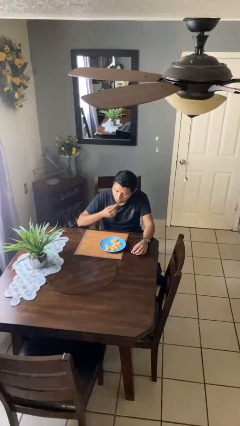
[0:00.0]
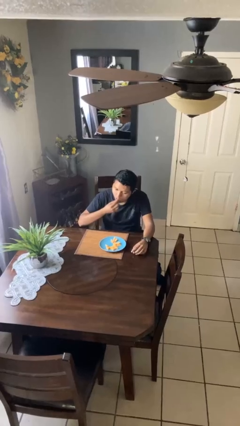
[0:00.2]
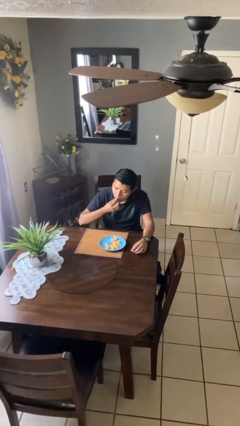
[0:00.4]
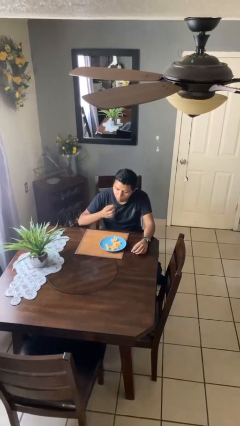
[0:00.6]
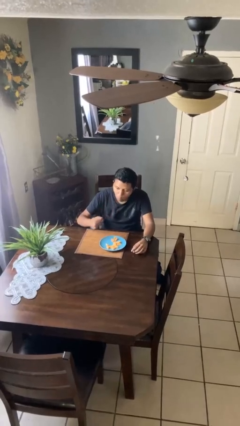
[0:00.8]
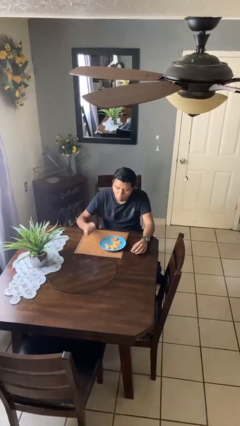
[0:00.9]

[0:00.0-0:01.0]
person eats with hands

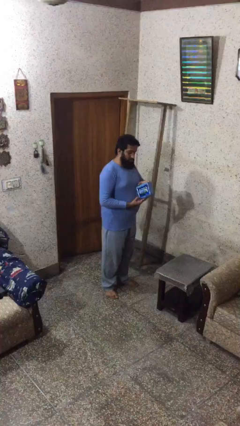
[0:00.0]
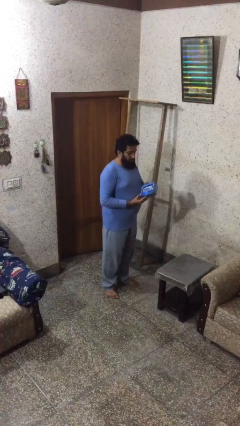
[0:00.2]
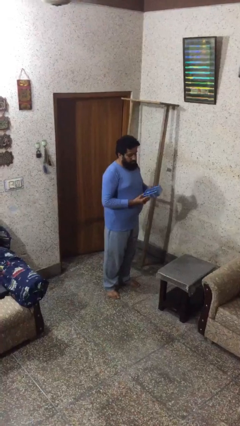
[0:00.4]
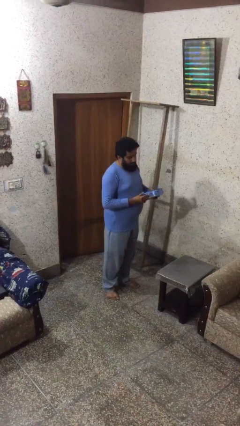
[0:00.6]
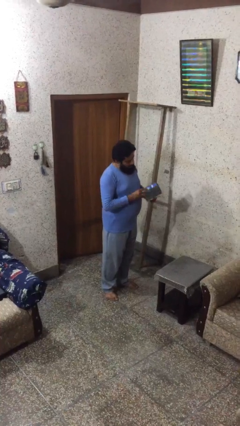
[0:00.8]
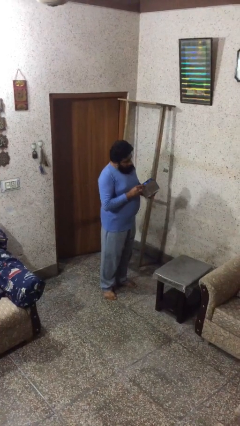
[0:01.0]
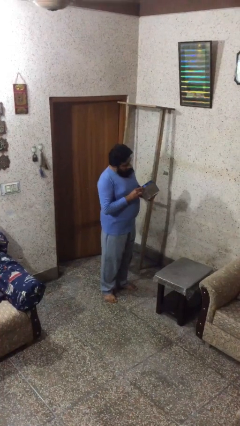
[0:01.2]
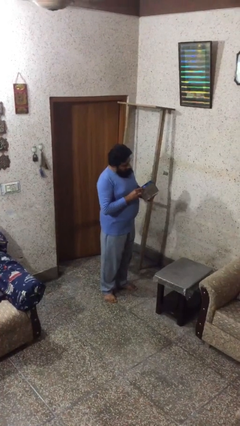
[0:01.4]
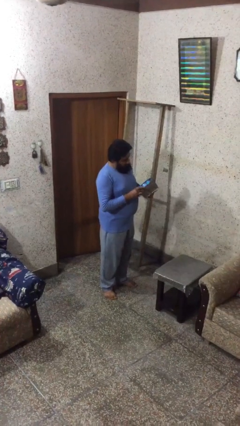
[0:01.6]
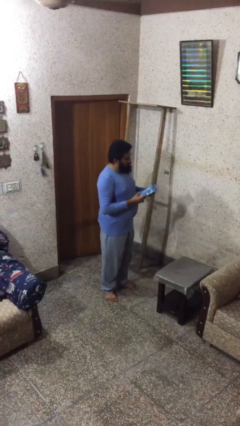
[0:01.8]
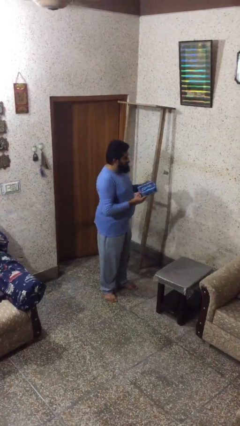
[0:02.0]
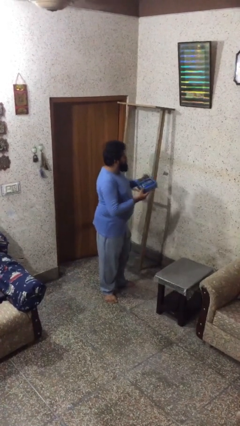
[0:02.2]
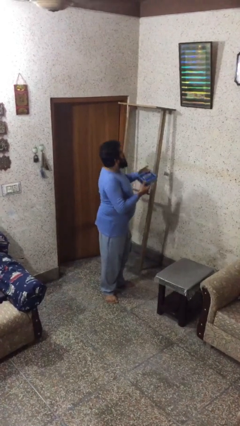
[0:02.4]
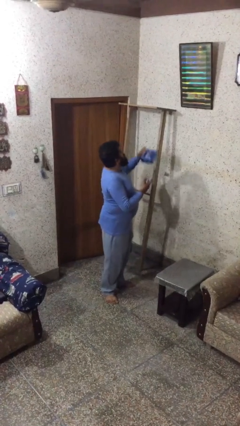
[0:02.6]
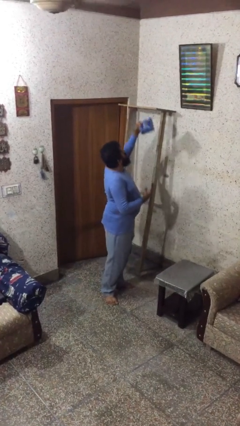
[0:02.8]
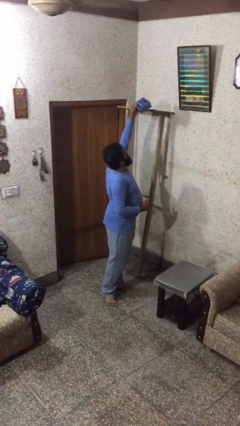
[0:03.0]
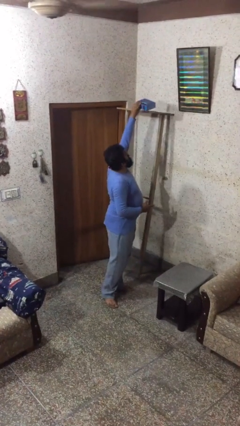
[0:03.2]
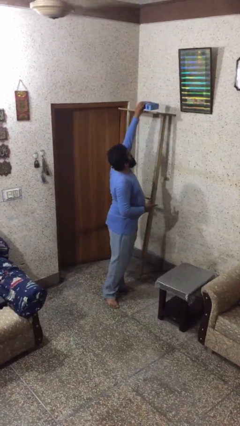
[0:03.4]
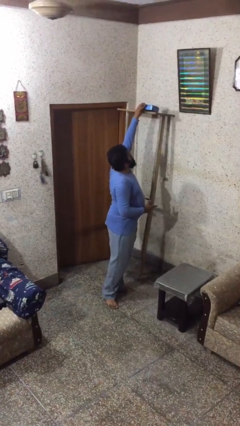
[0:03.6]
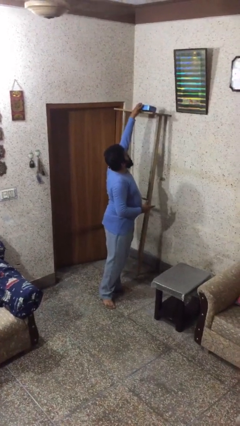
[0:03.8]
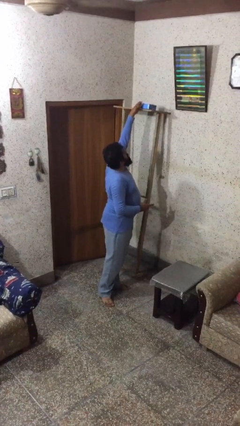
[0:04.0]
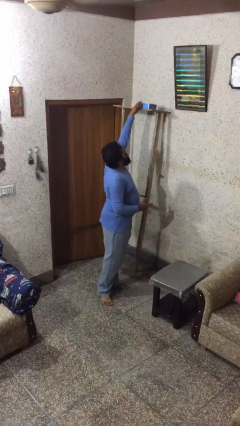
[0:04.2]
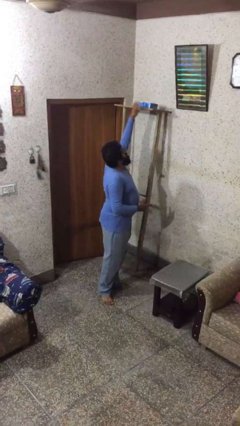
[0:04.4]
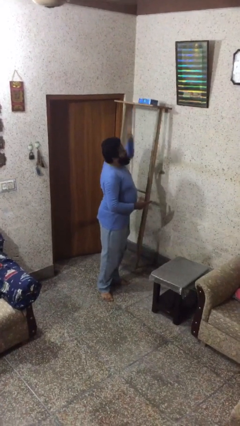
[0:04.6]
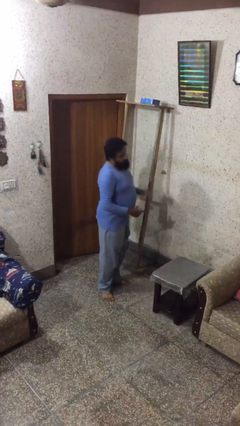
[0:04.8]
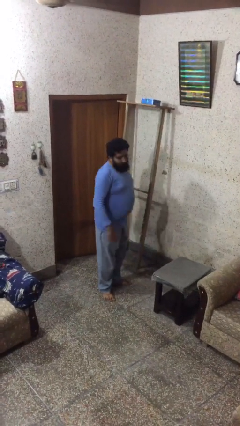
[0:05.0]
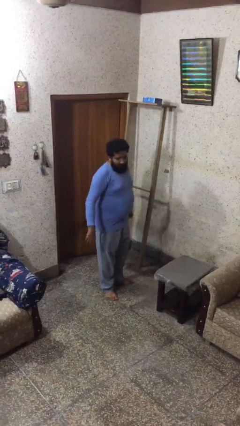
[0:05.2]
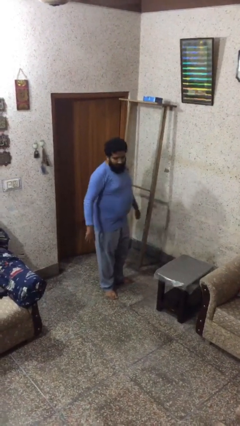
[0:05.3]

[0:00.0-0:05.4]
person puts down object on shelf

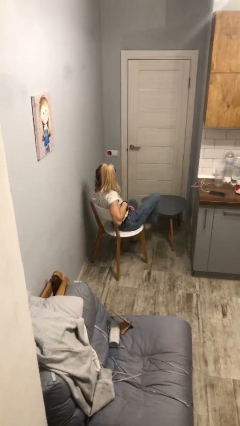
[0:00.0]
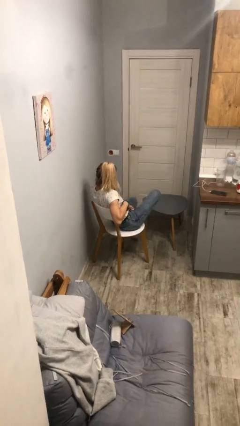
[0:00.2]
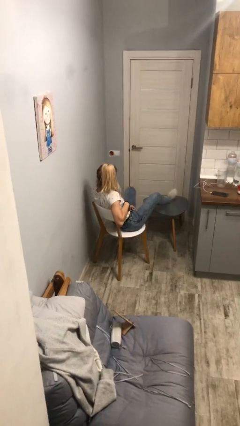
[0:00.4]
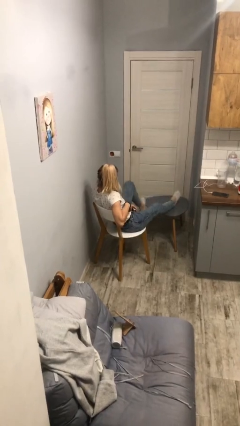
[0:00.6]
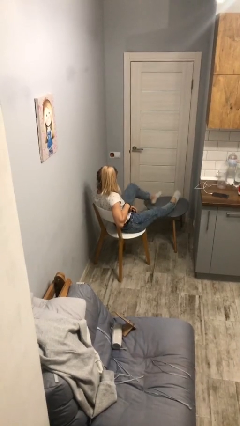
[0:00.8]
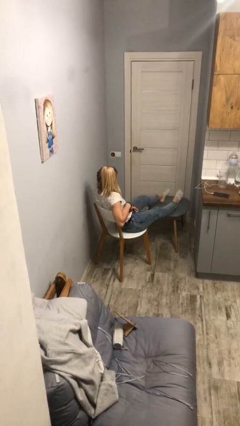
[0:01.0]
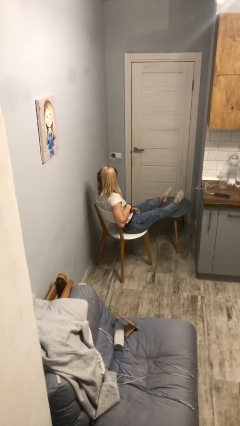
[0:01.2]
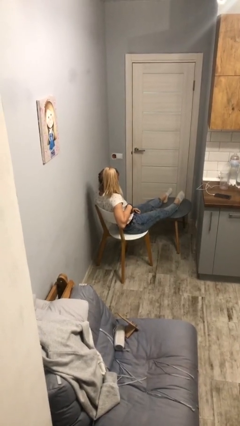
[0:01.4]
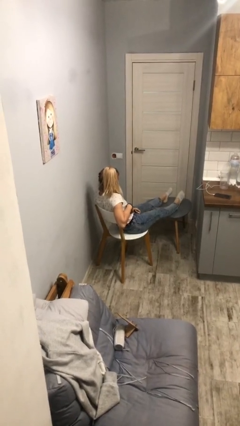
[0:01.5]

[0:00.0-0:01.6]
person puts feet up

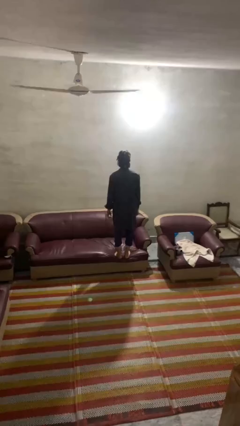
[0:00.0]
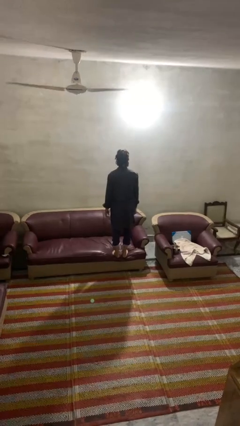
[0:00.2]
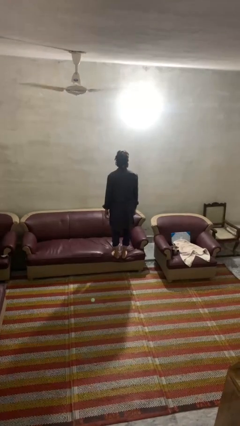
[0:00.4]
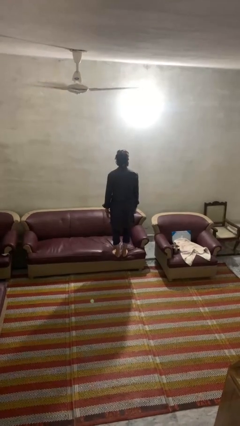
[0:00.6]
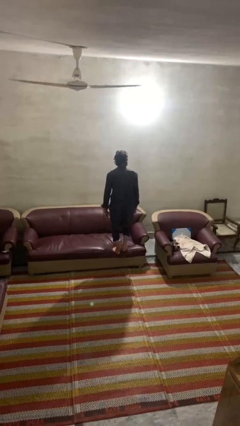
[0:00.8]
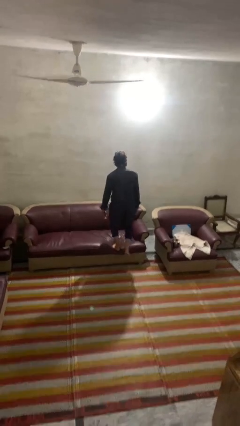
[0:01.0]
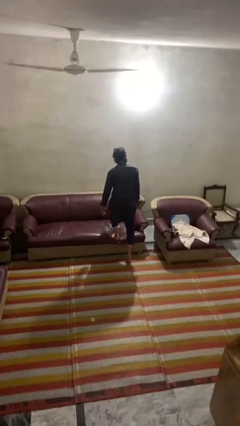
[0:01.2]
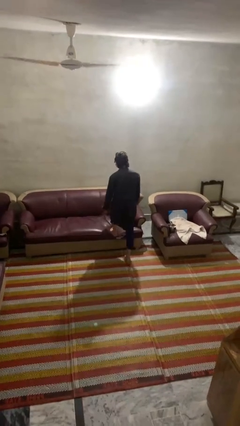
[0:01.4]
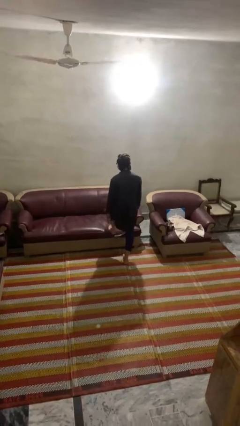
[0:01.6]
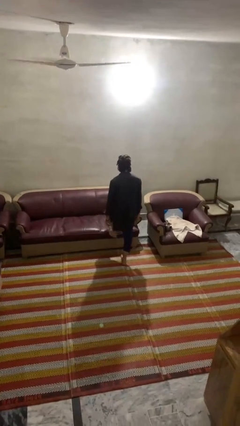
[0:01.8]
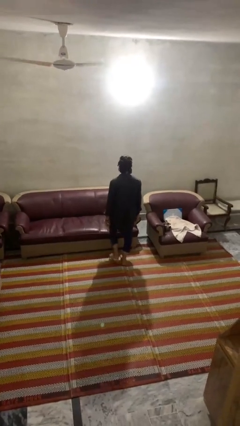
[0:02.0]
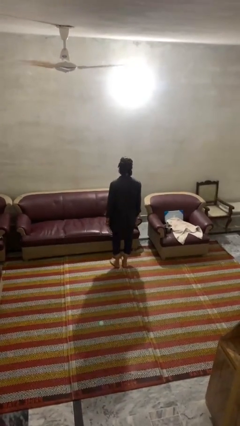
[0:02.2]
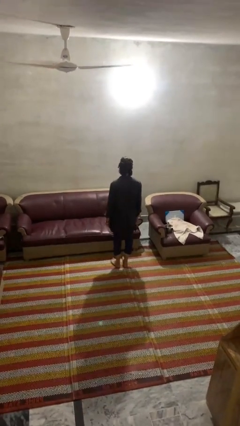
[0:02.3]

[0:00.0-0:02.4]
person climbs off couch

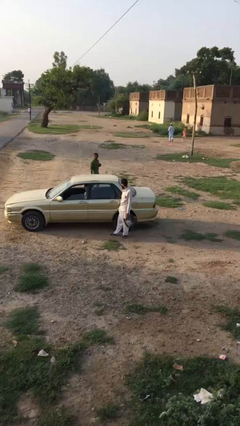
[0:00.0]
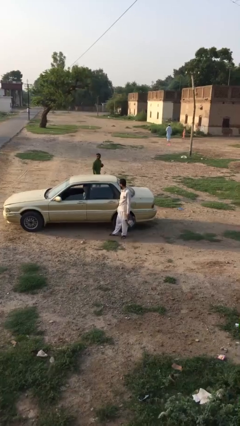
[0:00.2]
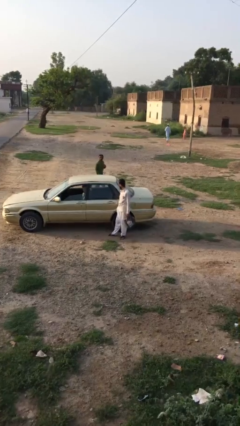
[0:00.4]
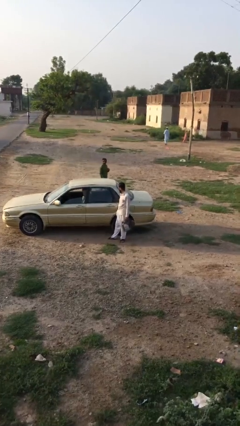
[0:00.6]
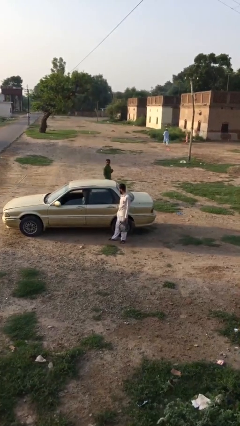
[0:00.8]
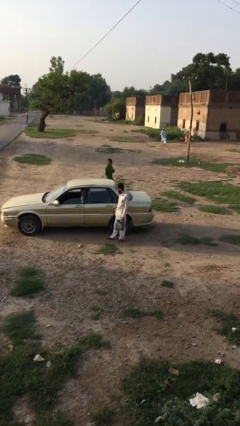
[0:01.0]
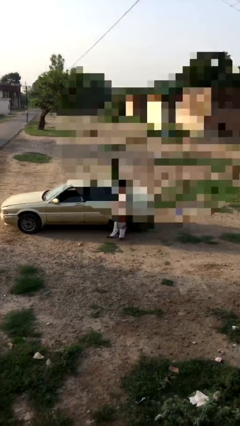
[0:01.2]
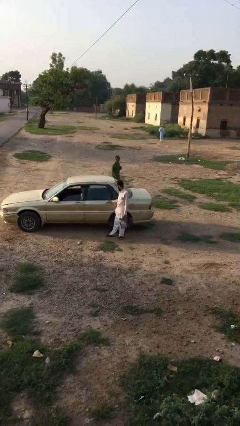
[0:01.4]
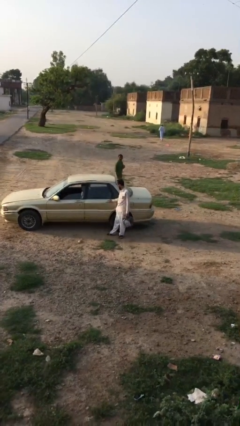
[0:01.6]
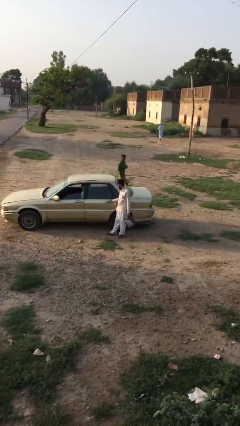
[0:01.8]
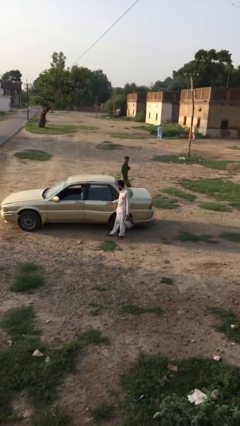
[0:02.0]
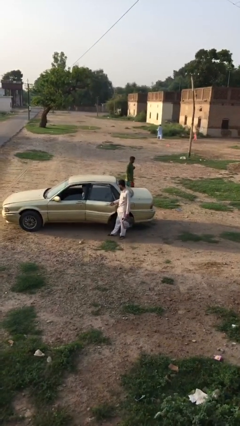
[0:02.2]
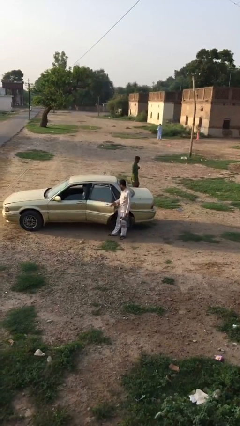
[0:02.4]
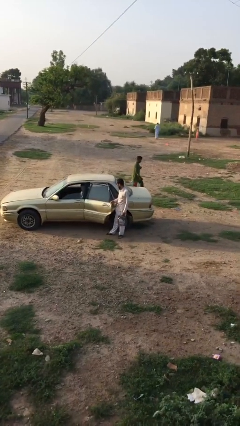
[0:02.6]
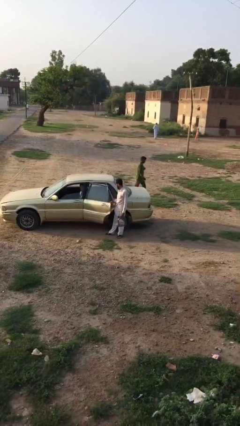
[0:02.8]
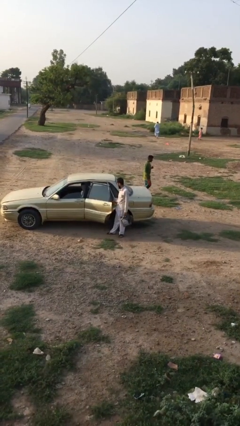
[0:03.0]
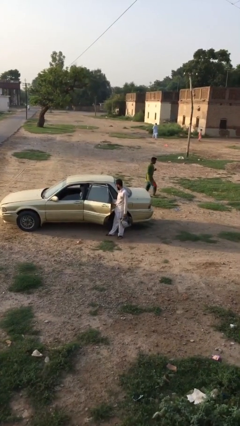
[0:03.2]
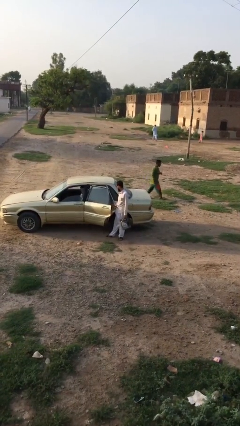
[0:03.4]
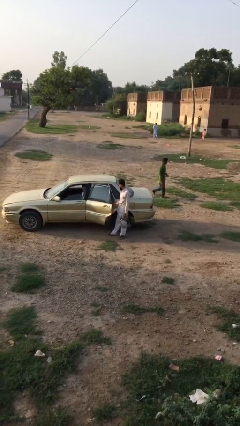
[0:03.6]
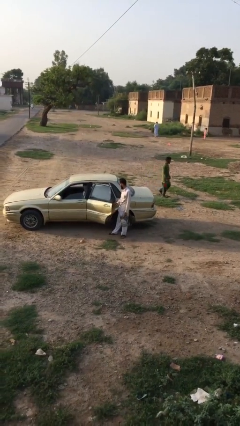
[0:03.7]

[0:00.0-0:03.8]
person opens car door

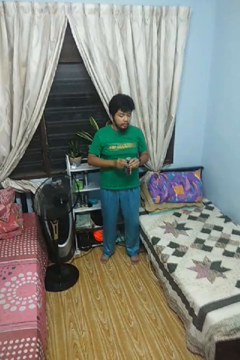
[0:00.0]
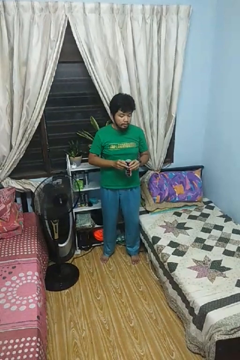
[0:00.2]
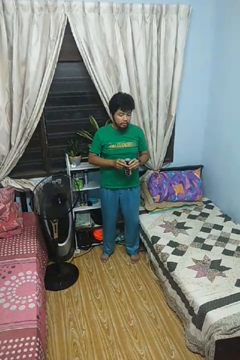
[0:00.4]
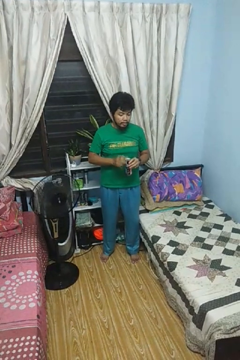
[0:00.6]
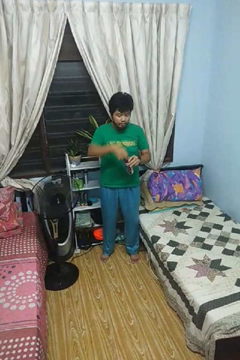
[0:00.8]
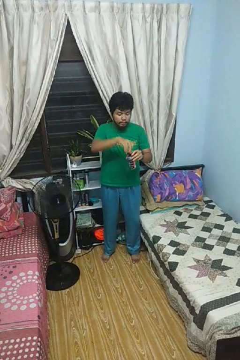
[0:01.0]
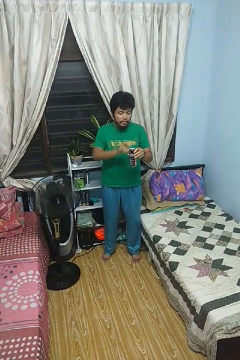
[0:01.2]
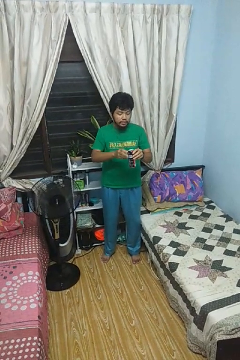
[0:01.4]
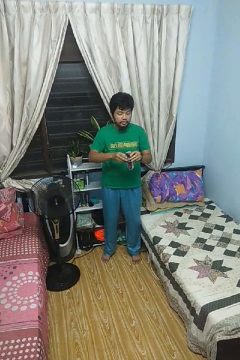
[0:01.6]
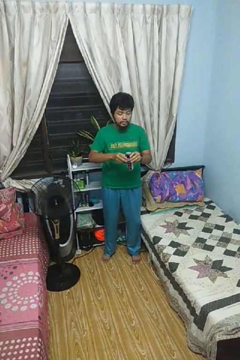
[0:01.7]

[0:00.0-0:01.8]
person opens beverage can

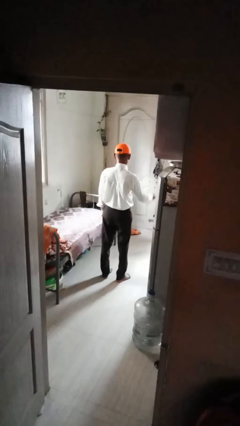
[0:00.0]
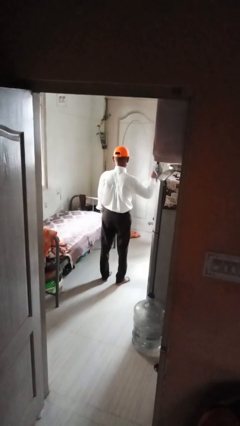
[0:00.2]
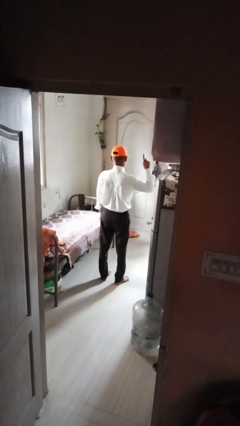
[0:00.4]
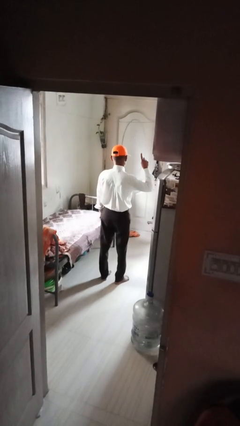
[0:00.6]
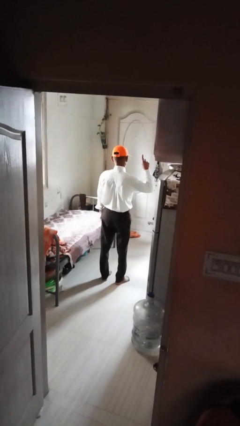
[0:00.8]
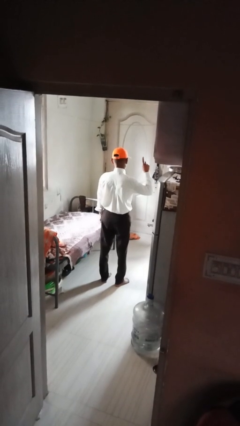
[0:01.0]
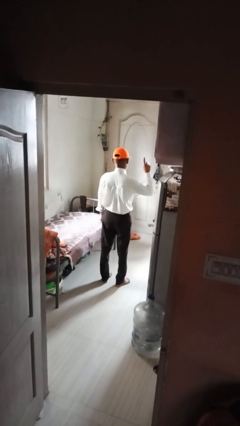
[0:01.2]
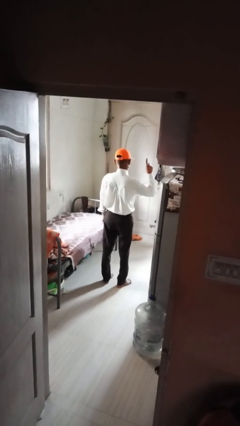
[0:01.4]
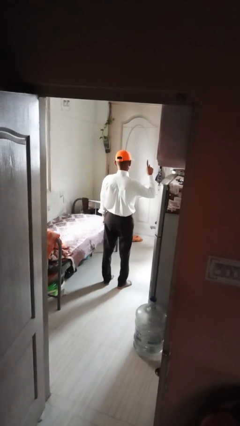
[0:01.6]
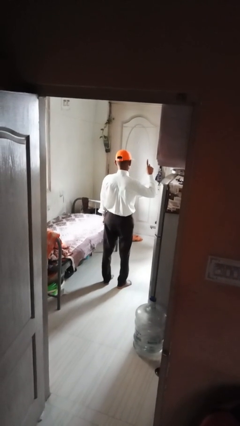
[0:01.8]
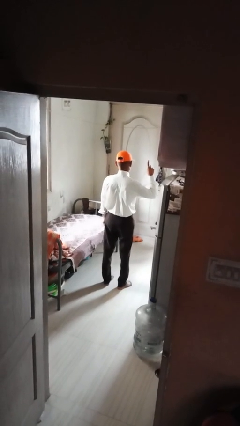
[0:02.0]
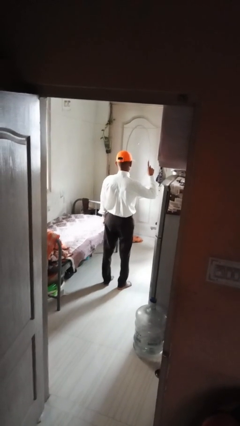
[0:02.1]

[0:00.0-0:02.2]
person gestures number one
